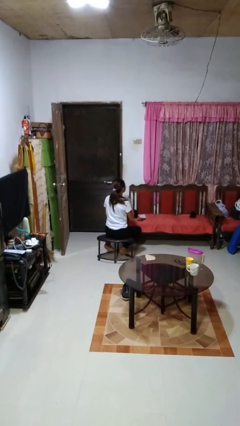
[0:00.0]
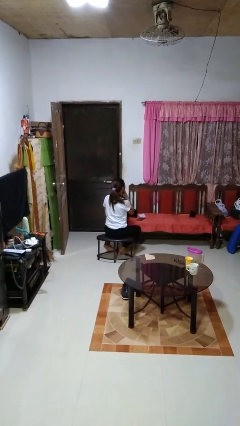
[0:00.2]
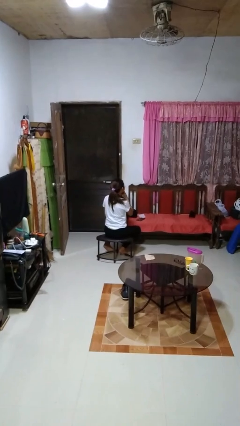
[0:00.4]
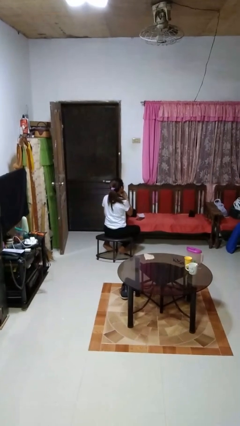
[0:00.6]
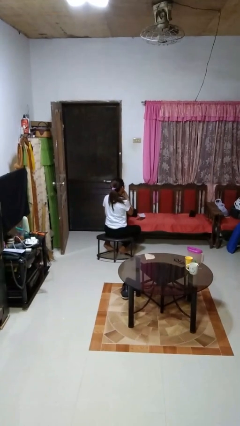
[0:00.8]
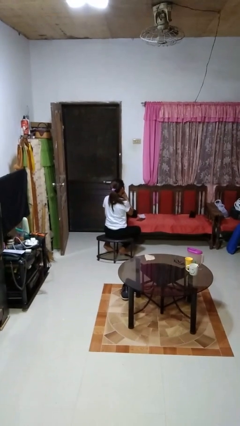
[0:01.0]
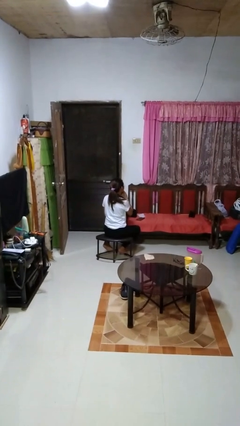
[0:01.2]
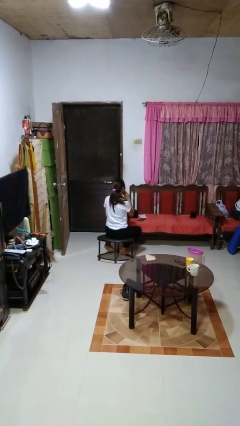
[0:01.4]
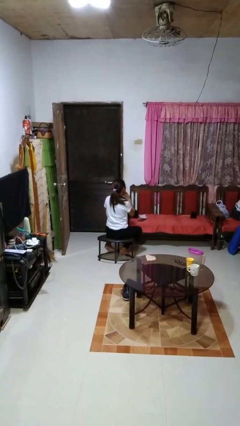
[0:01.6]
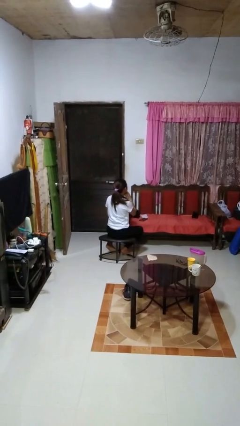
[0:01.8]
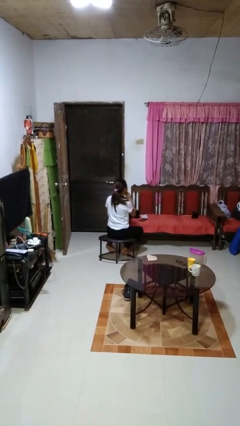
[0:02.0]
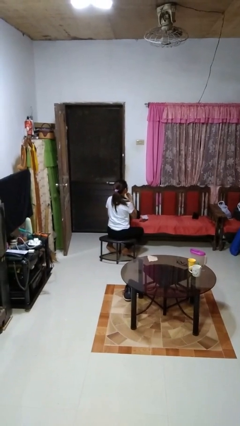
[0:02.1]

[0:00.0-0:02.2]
person strokes chin

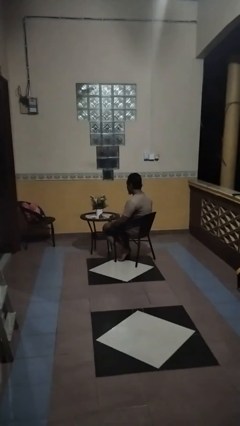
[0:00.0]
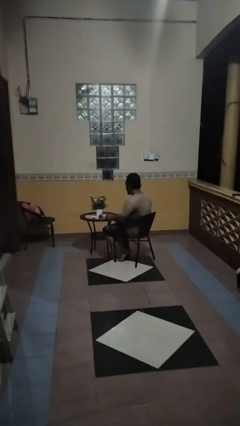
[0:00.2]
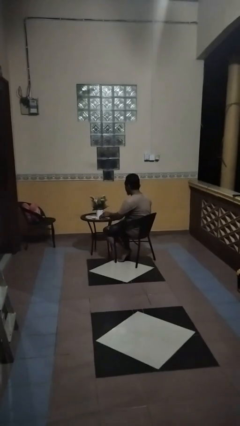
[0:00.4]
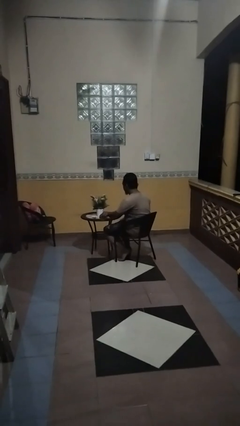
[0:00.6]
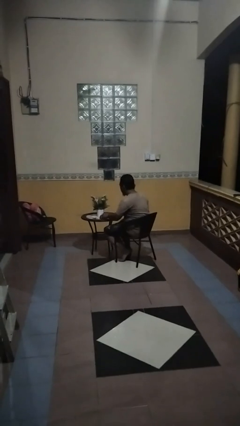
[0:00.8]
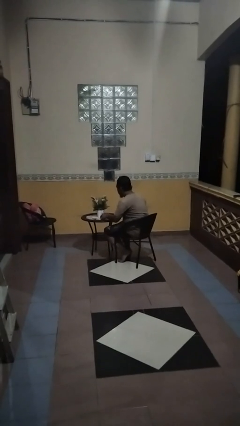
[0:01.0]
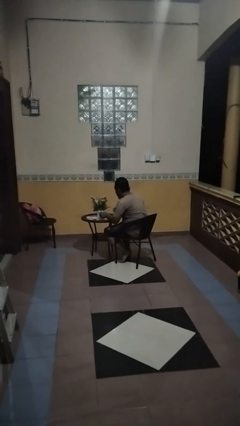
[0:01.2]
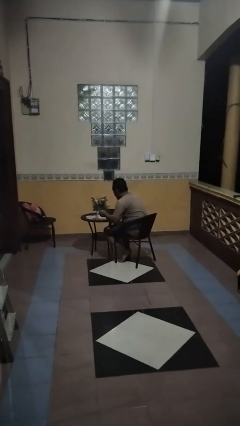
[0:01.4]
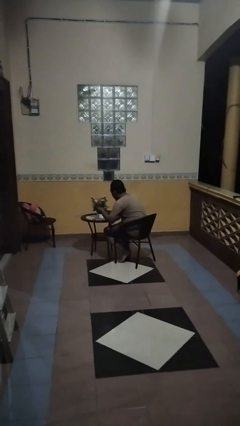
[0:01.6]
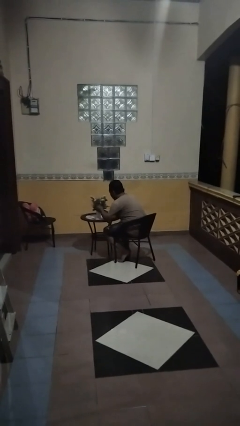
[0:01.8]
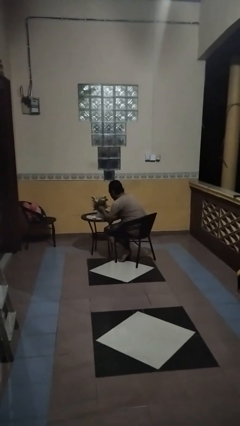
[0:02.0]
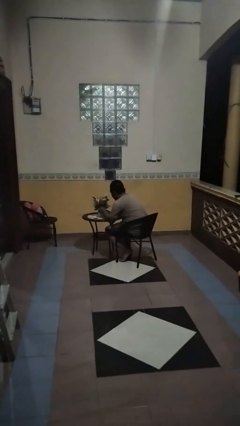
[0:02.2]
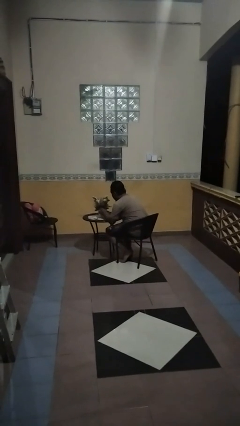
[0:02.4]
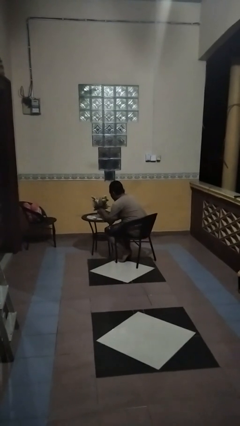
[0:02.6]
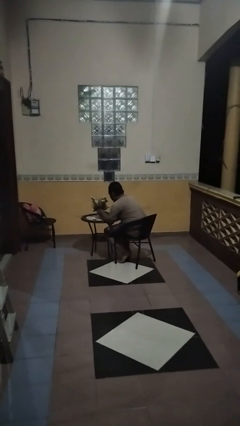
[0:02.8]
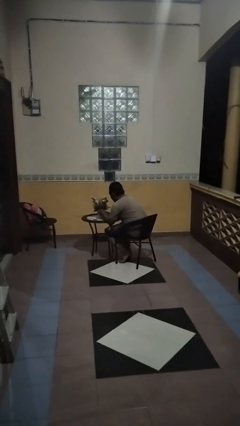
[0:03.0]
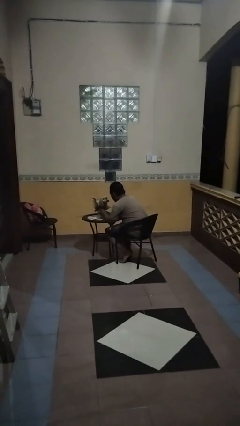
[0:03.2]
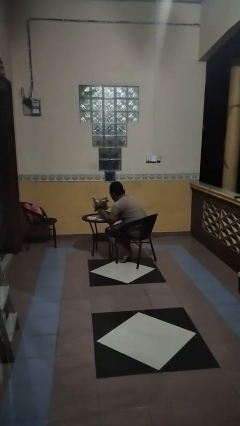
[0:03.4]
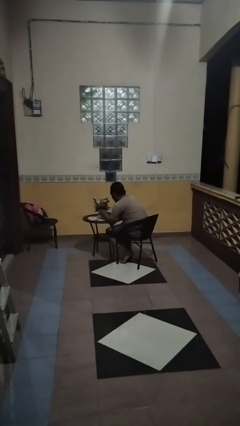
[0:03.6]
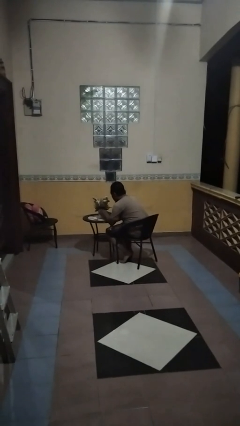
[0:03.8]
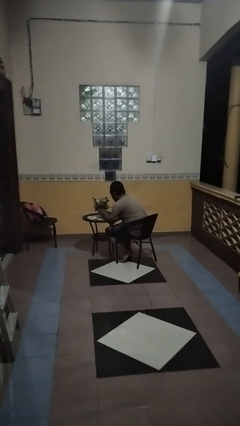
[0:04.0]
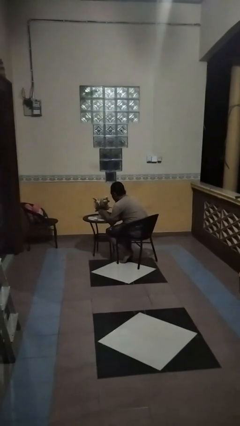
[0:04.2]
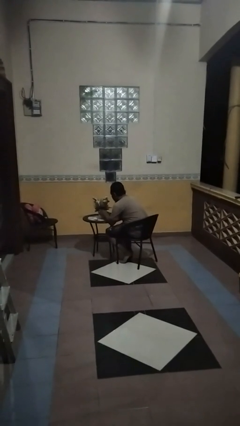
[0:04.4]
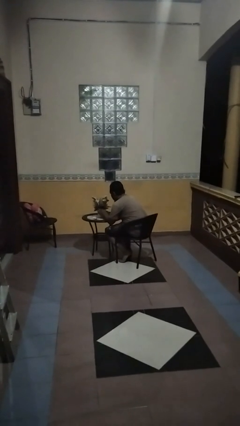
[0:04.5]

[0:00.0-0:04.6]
person arranges flowers in vase

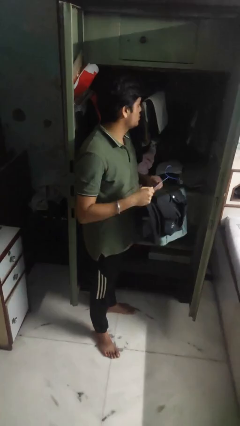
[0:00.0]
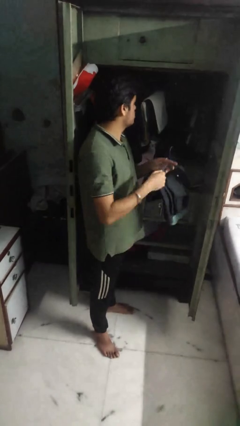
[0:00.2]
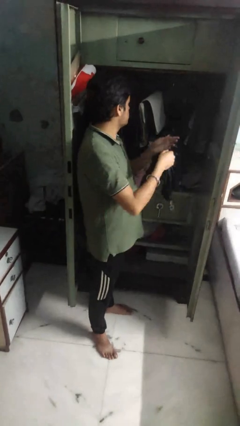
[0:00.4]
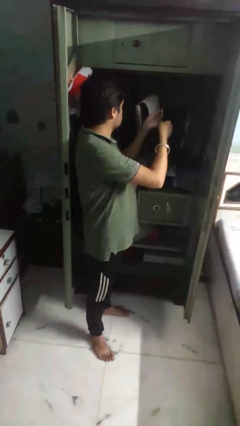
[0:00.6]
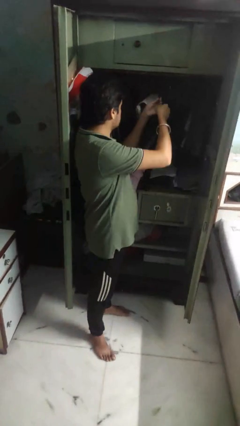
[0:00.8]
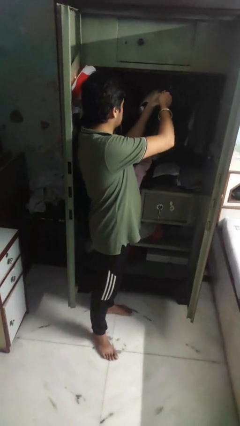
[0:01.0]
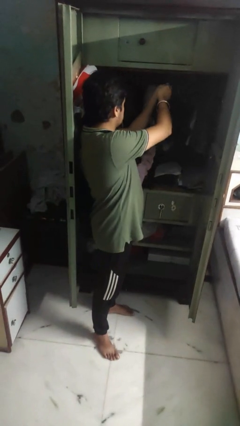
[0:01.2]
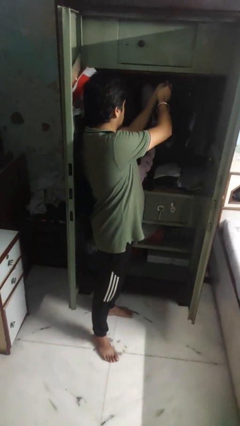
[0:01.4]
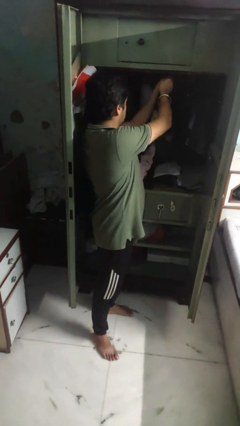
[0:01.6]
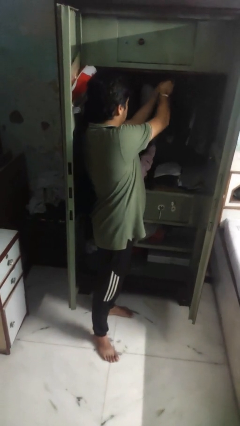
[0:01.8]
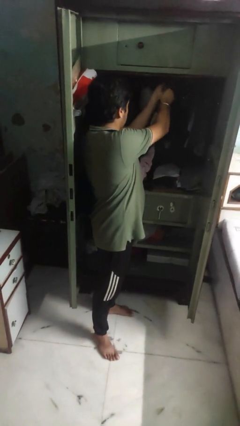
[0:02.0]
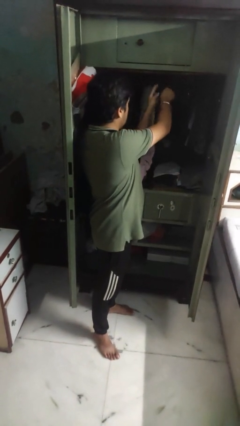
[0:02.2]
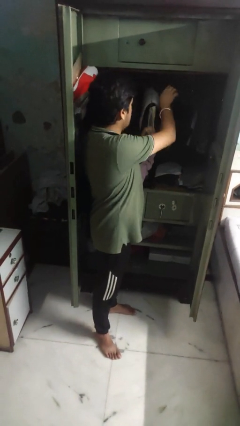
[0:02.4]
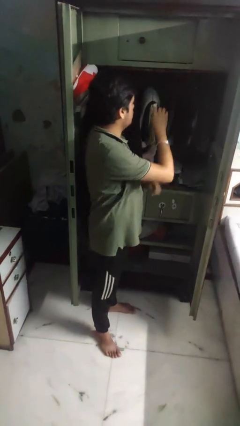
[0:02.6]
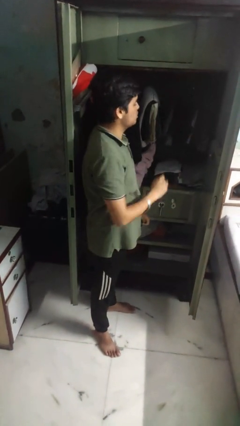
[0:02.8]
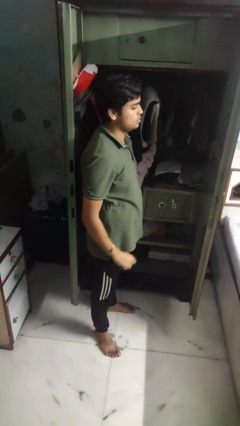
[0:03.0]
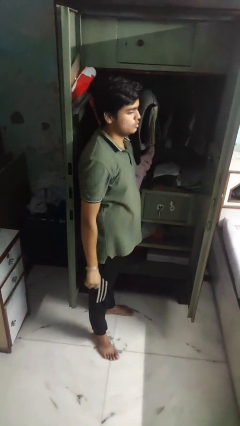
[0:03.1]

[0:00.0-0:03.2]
person puts clothes into closet

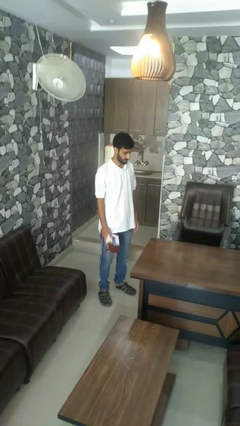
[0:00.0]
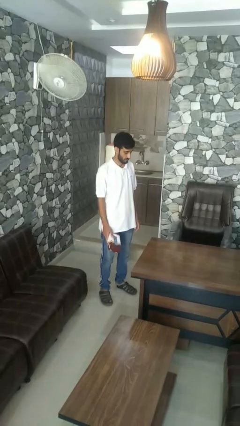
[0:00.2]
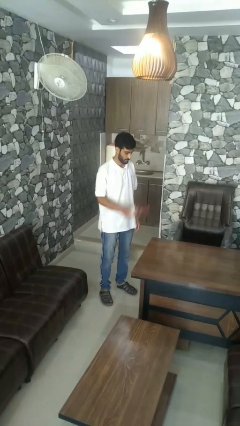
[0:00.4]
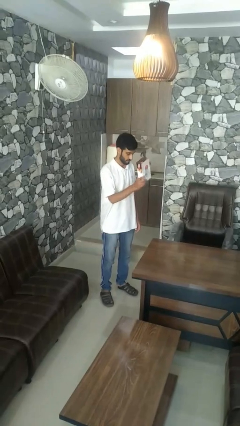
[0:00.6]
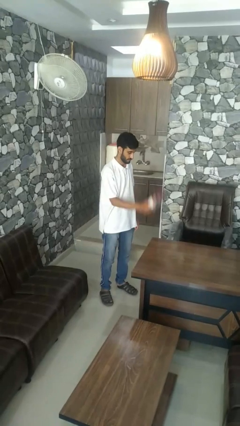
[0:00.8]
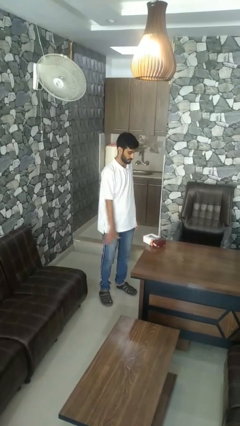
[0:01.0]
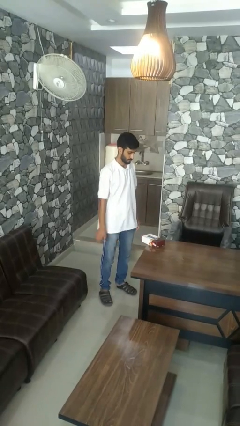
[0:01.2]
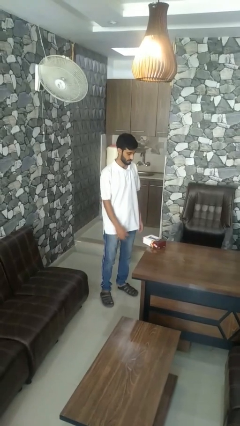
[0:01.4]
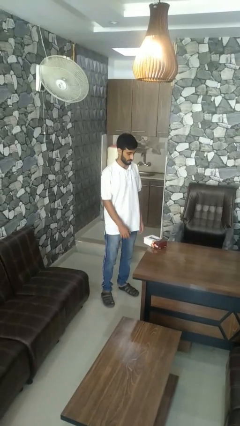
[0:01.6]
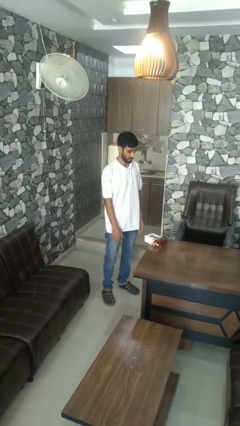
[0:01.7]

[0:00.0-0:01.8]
person throws object on table

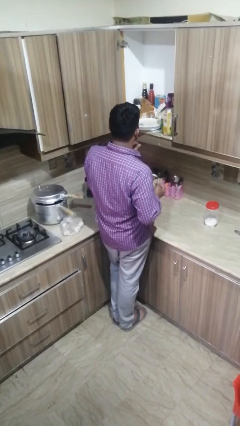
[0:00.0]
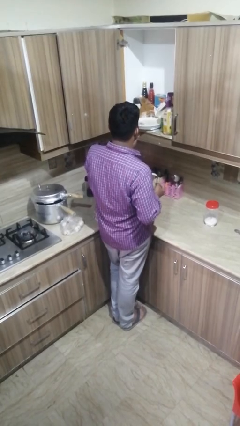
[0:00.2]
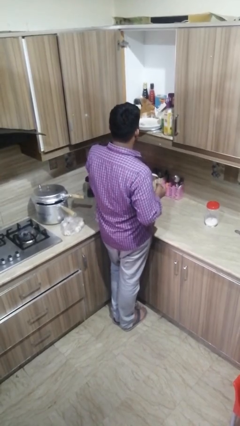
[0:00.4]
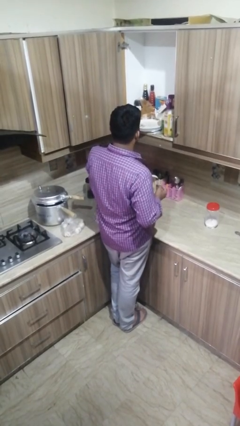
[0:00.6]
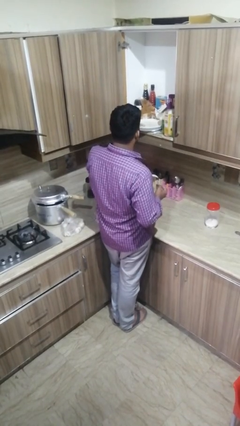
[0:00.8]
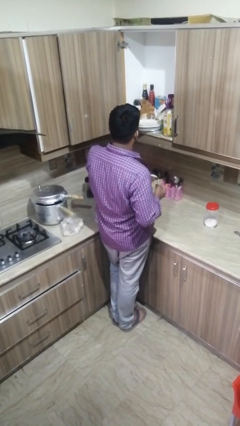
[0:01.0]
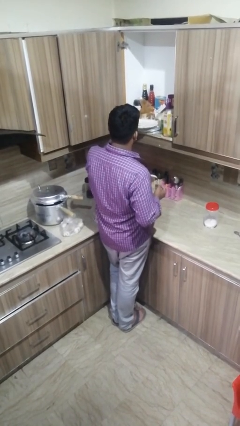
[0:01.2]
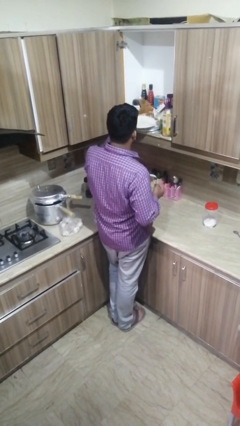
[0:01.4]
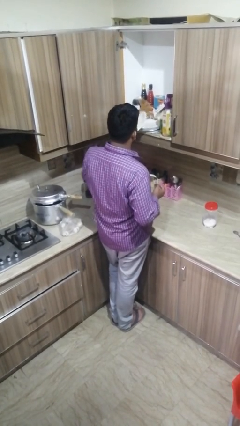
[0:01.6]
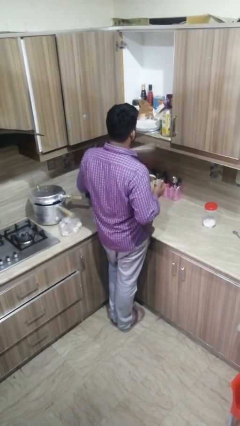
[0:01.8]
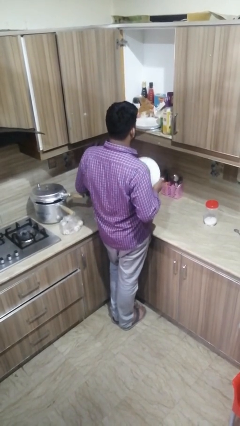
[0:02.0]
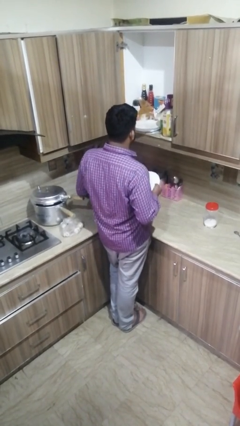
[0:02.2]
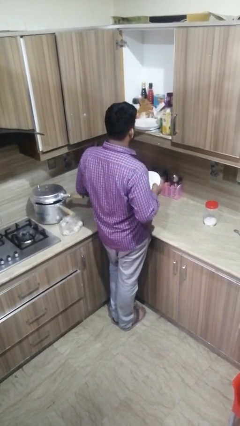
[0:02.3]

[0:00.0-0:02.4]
person takes object from cabinet

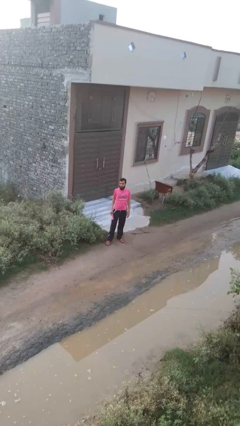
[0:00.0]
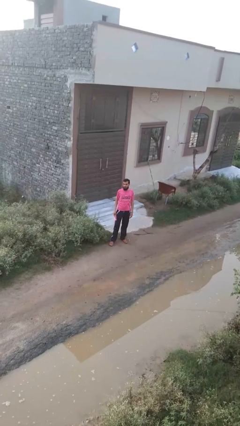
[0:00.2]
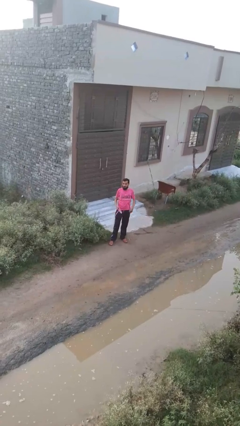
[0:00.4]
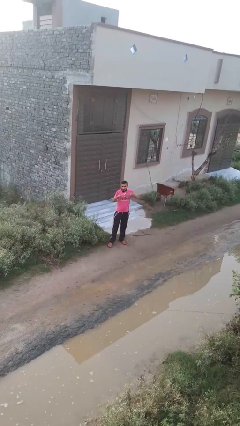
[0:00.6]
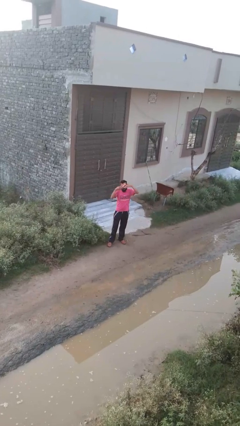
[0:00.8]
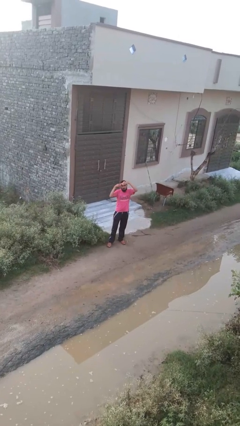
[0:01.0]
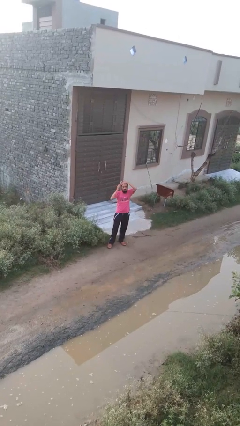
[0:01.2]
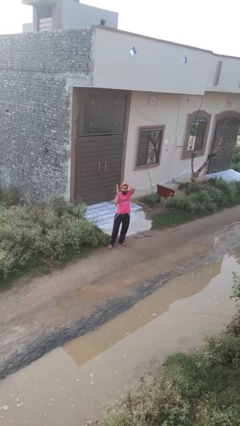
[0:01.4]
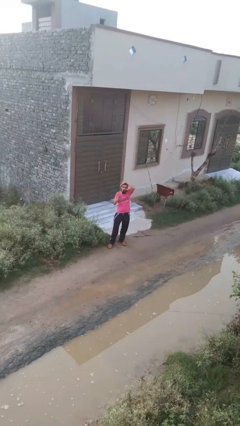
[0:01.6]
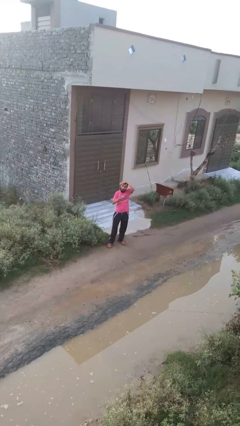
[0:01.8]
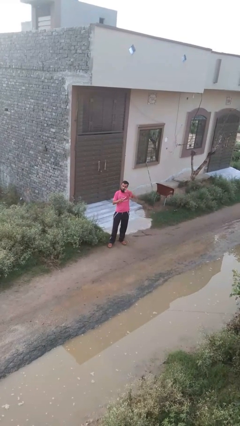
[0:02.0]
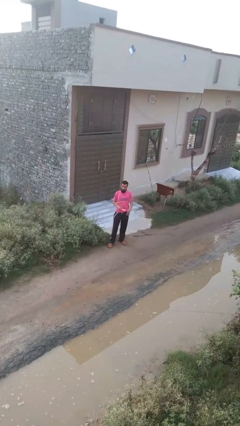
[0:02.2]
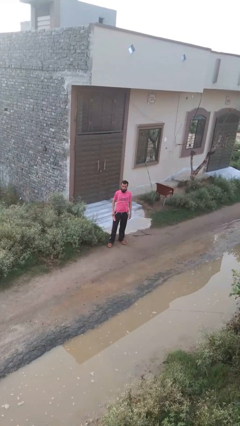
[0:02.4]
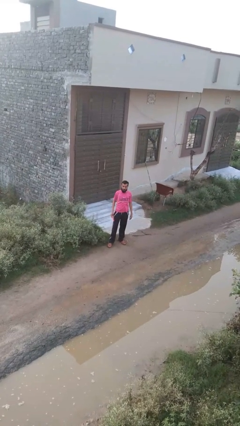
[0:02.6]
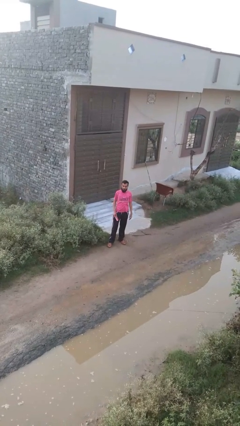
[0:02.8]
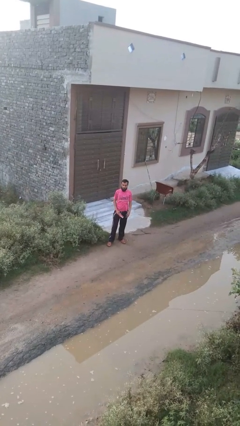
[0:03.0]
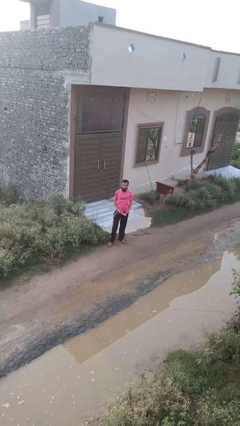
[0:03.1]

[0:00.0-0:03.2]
person brushes hair
